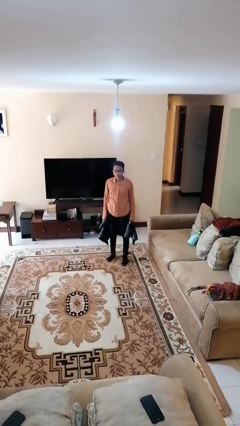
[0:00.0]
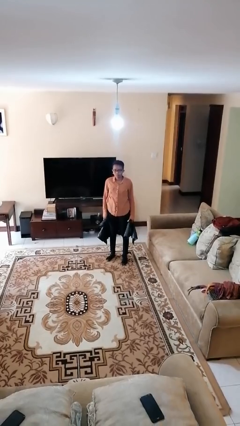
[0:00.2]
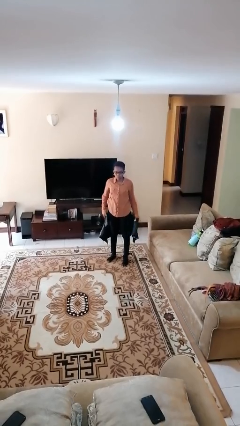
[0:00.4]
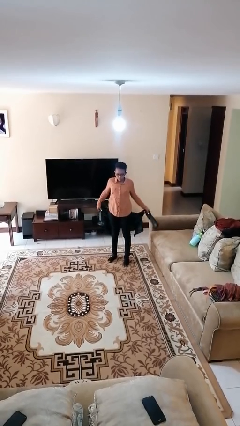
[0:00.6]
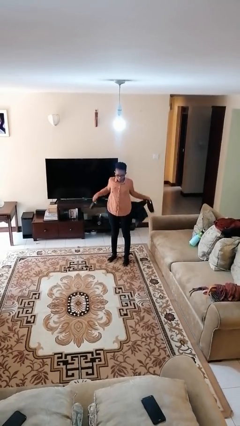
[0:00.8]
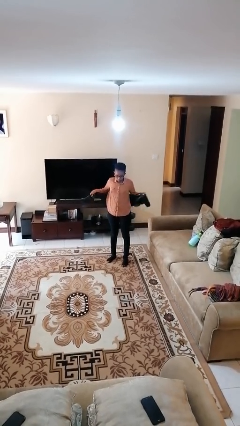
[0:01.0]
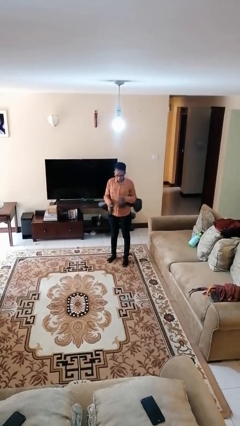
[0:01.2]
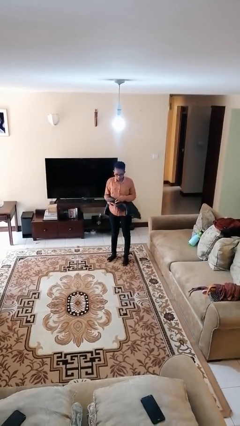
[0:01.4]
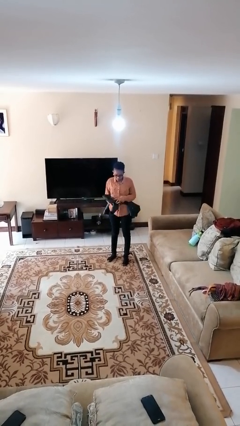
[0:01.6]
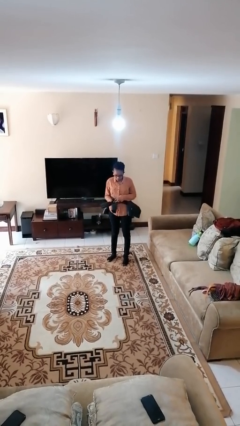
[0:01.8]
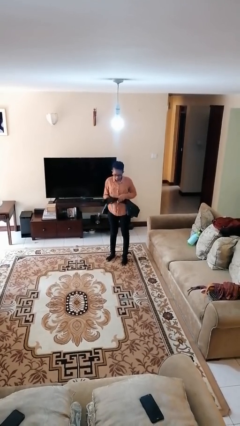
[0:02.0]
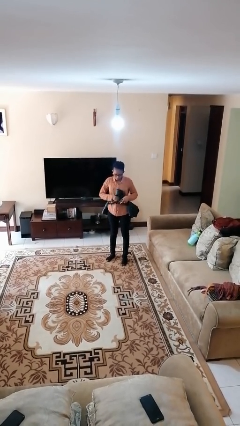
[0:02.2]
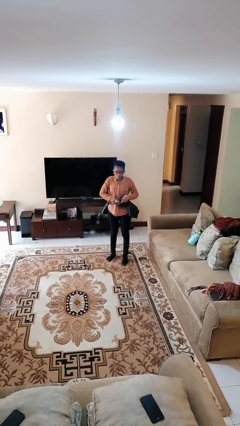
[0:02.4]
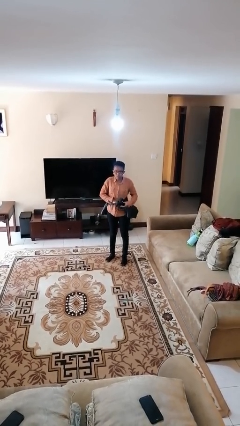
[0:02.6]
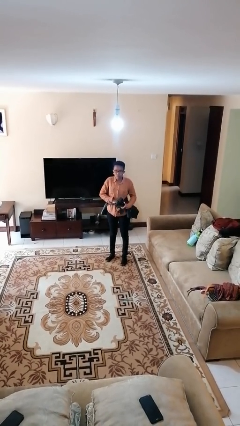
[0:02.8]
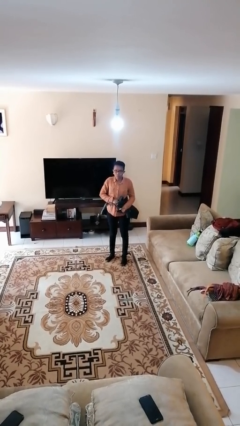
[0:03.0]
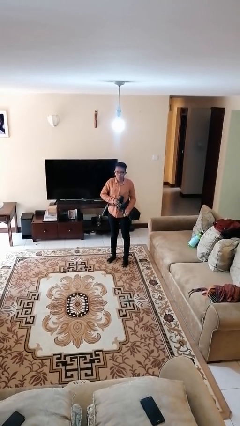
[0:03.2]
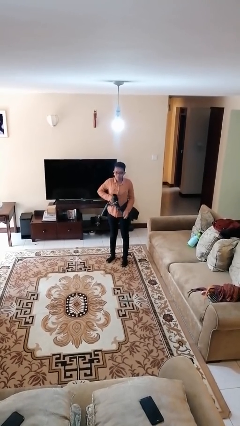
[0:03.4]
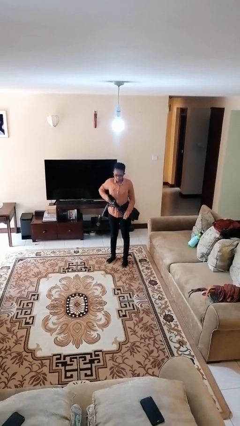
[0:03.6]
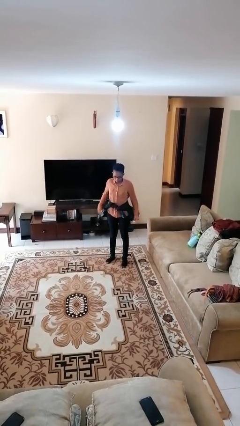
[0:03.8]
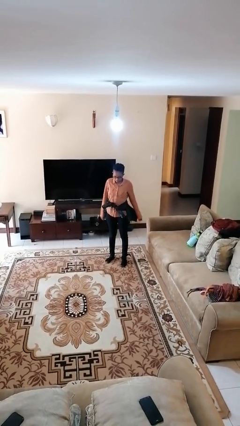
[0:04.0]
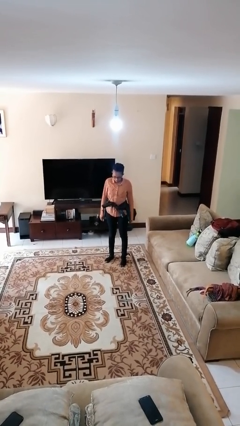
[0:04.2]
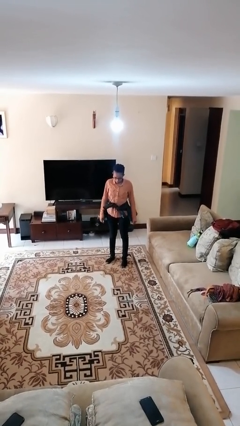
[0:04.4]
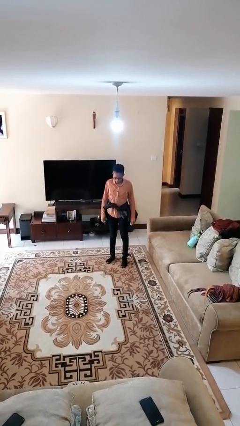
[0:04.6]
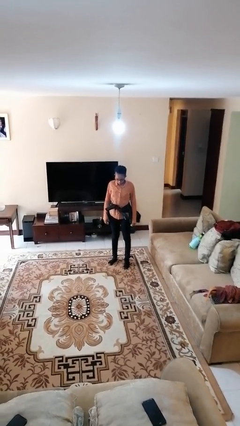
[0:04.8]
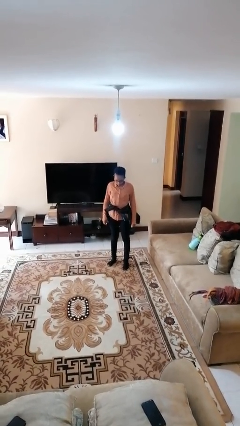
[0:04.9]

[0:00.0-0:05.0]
person ties jacket around waist

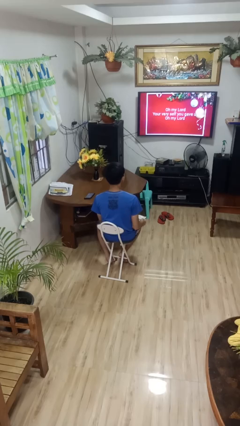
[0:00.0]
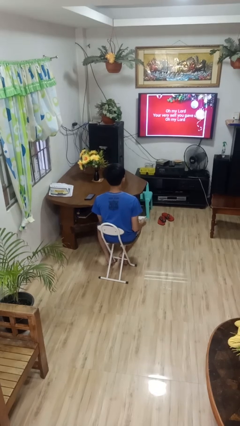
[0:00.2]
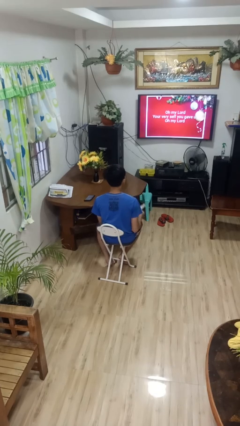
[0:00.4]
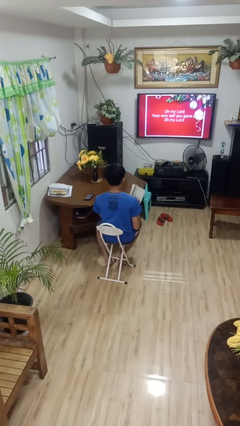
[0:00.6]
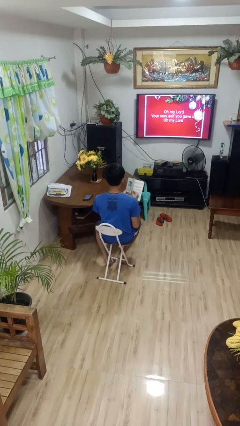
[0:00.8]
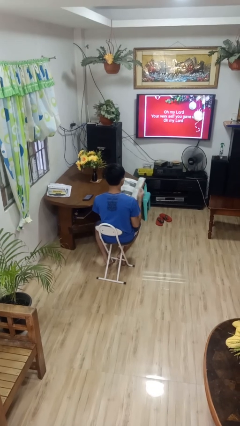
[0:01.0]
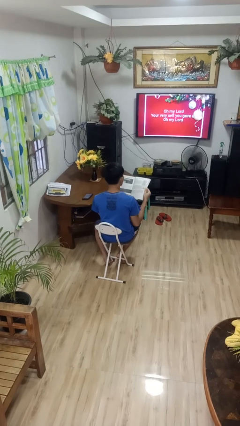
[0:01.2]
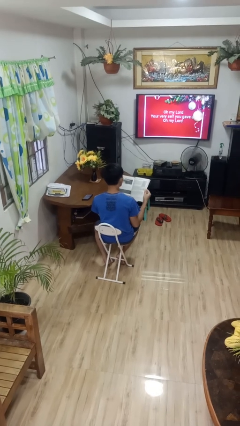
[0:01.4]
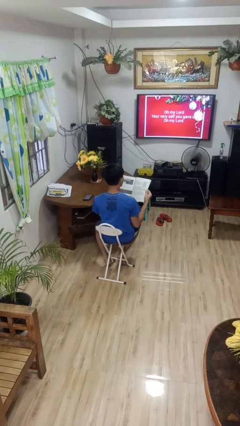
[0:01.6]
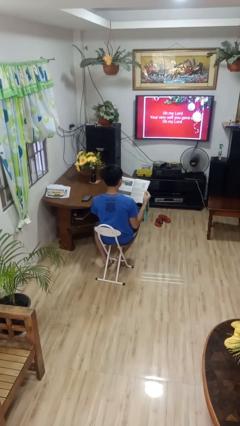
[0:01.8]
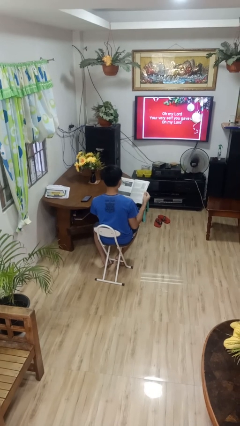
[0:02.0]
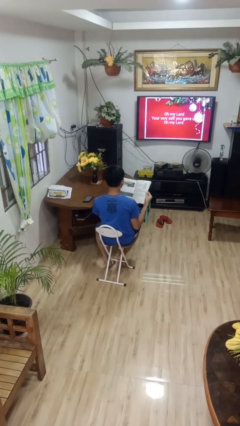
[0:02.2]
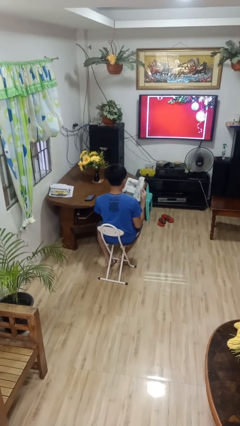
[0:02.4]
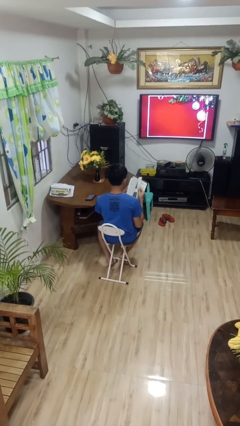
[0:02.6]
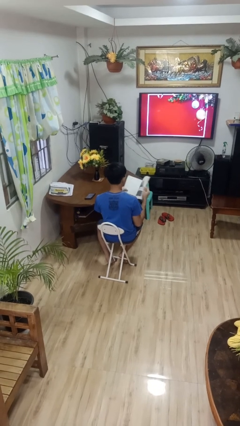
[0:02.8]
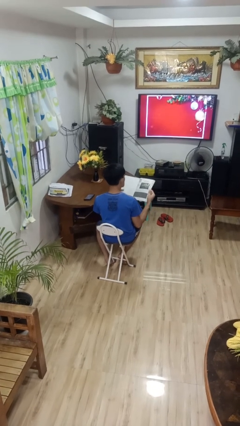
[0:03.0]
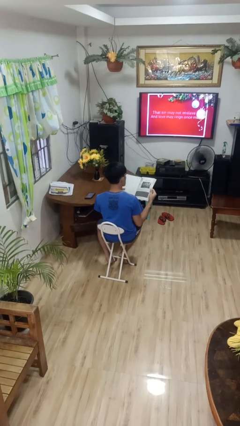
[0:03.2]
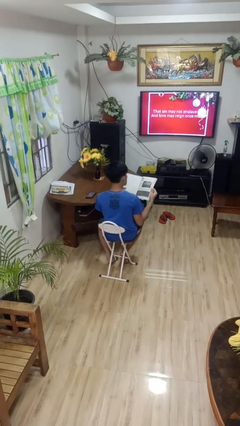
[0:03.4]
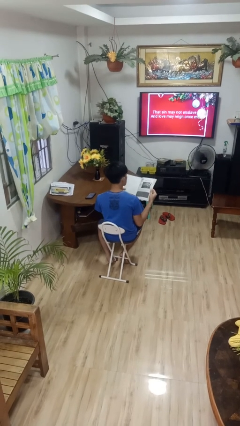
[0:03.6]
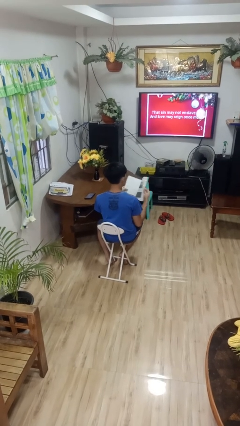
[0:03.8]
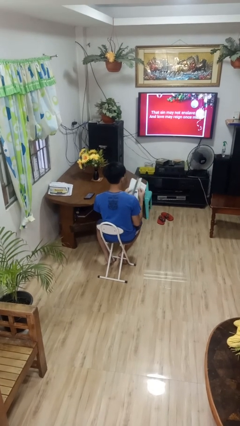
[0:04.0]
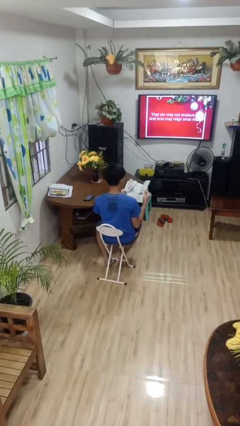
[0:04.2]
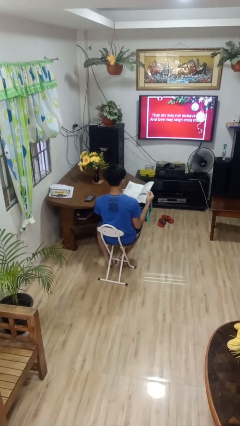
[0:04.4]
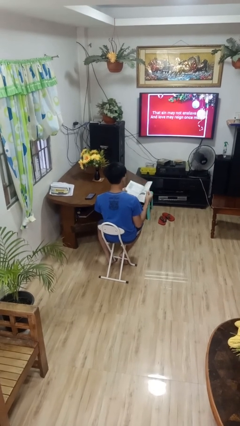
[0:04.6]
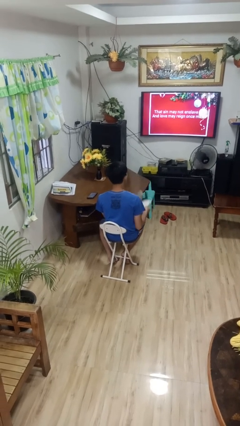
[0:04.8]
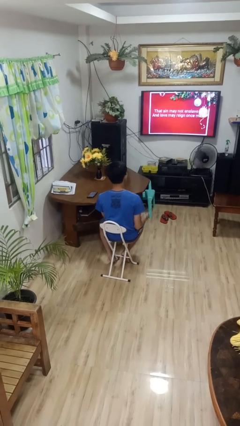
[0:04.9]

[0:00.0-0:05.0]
person reads book

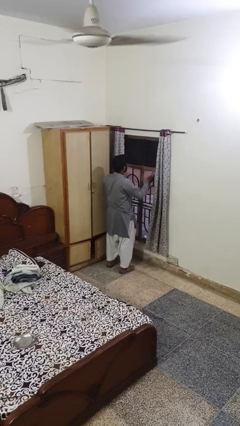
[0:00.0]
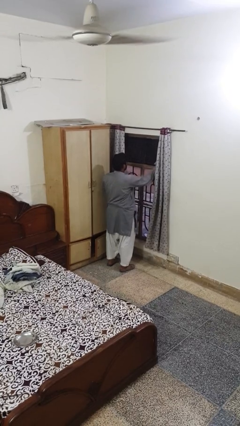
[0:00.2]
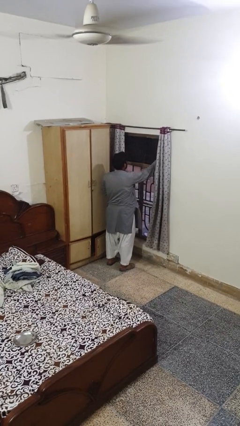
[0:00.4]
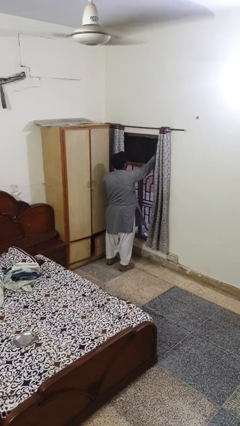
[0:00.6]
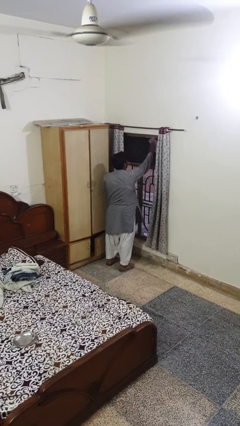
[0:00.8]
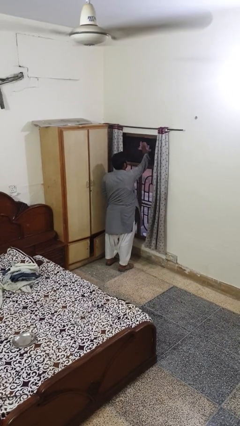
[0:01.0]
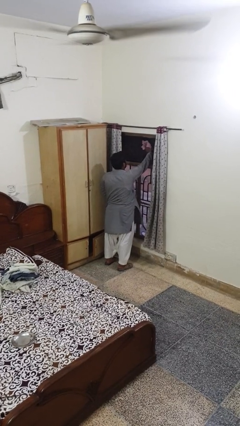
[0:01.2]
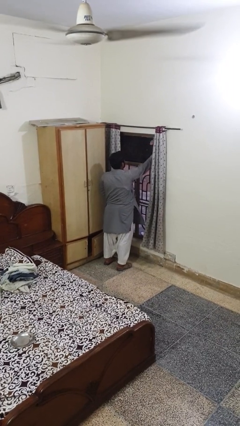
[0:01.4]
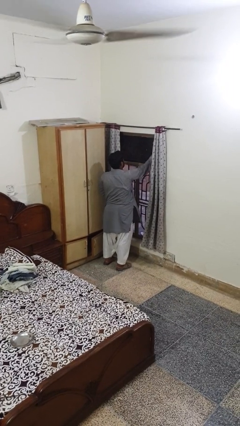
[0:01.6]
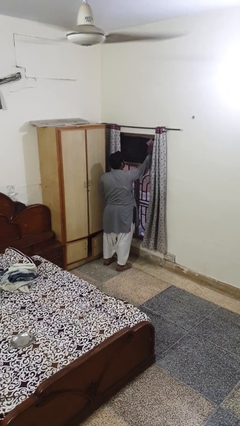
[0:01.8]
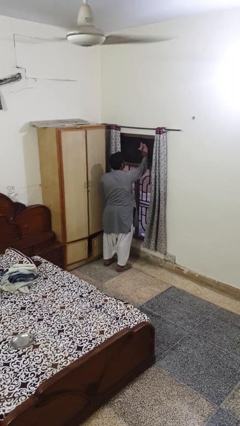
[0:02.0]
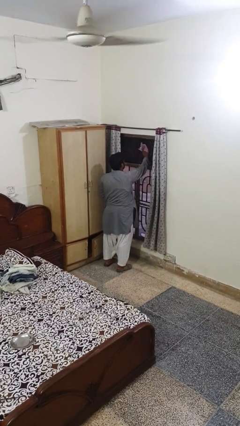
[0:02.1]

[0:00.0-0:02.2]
person washes window

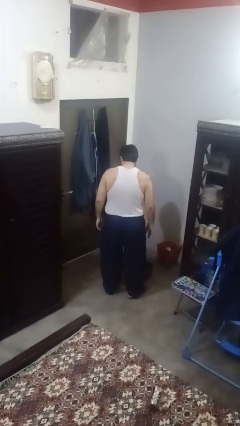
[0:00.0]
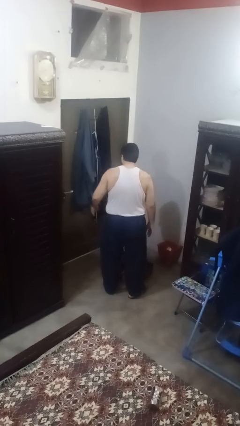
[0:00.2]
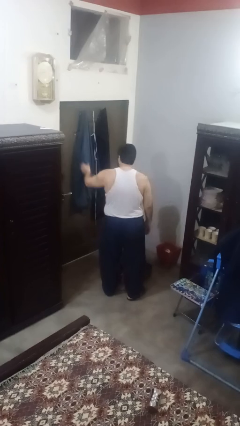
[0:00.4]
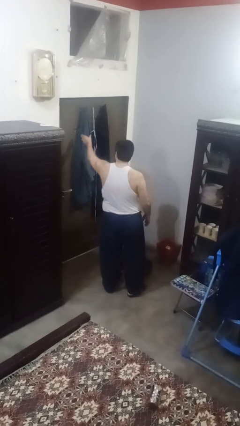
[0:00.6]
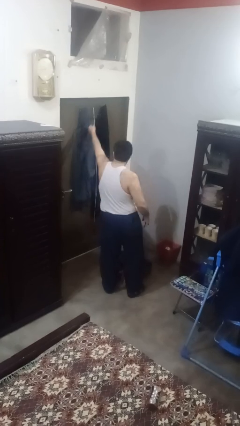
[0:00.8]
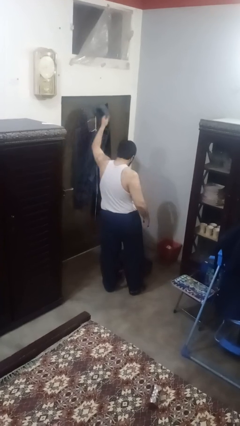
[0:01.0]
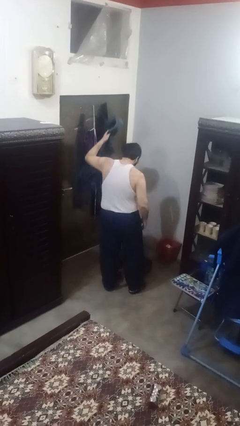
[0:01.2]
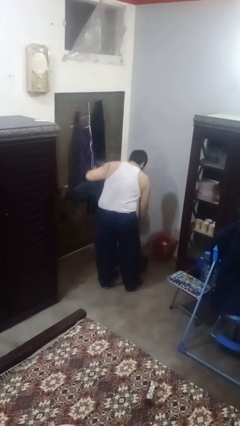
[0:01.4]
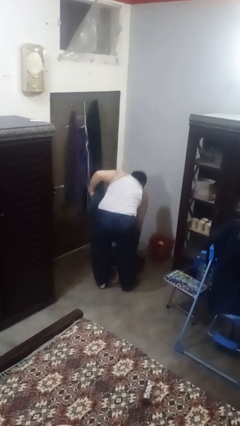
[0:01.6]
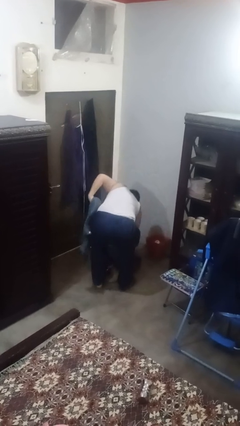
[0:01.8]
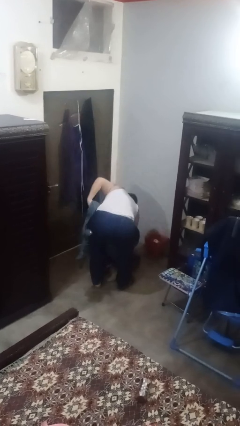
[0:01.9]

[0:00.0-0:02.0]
person loads clothes into suitcase

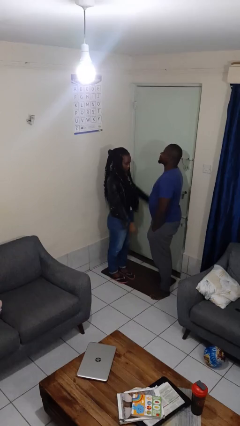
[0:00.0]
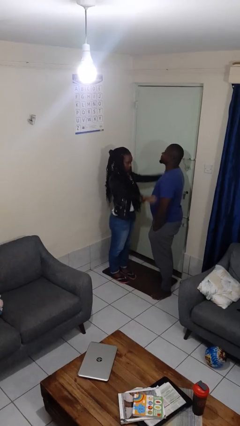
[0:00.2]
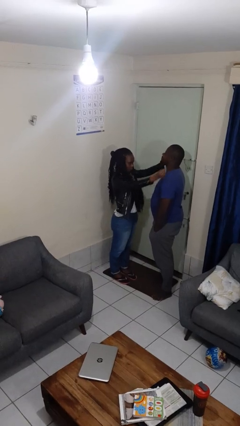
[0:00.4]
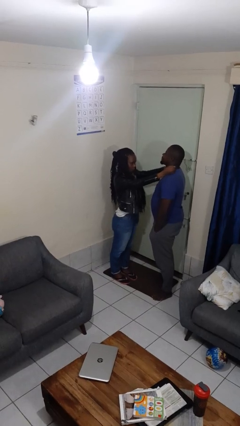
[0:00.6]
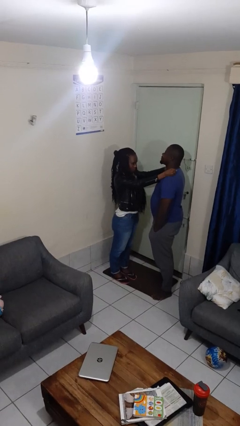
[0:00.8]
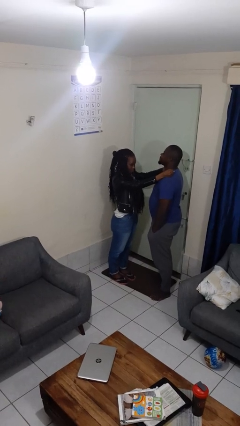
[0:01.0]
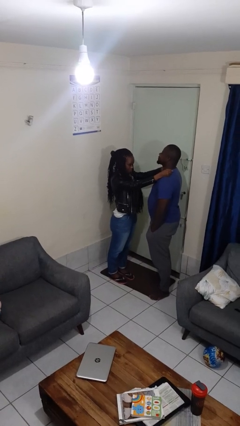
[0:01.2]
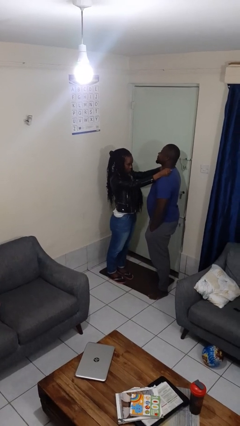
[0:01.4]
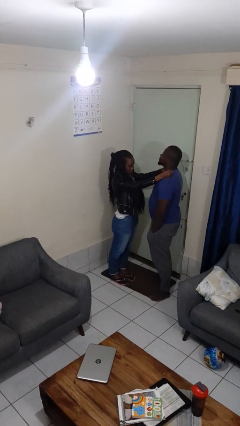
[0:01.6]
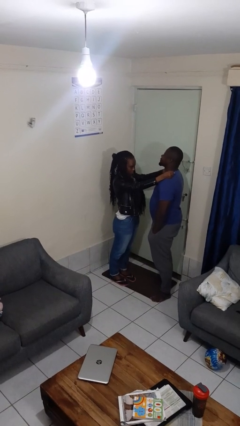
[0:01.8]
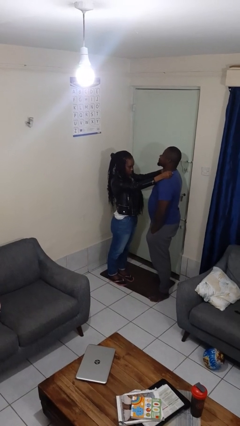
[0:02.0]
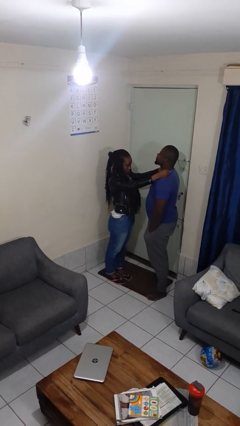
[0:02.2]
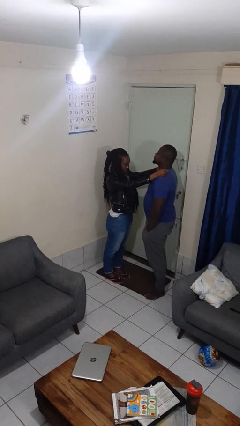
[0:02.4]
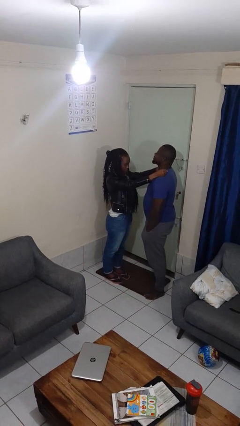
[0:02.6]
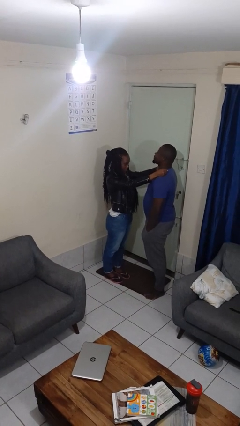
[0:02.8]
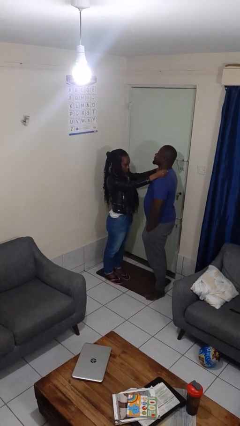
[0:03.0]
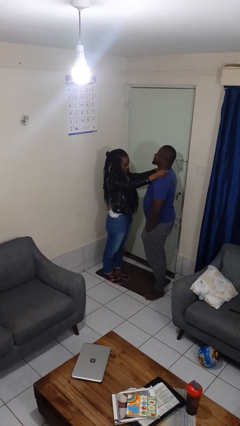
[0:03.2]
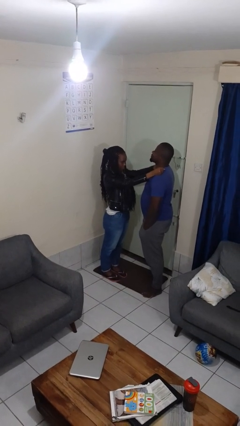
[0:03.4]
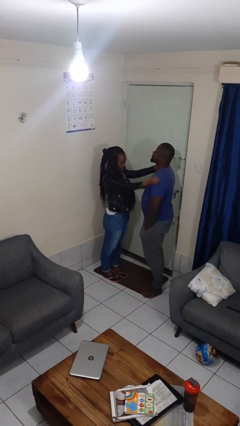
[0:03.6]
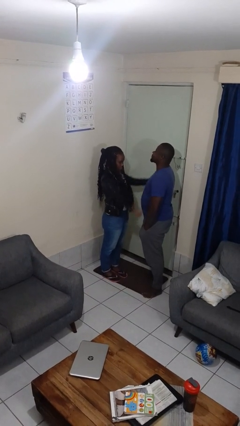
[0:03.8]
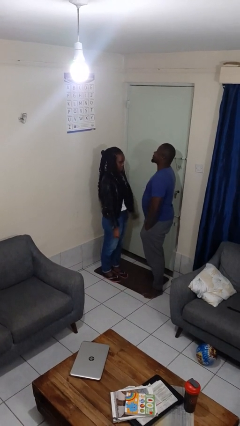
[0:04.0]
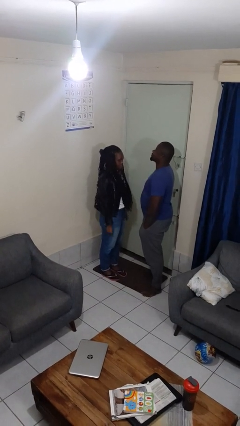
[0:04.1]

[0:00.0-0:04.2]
person pounds shoulders of person
